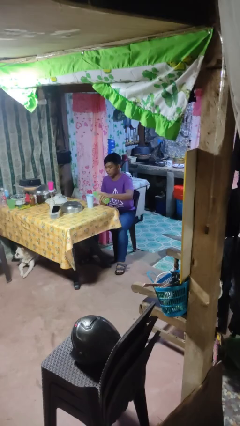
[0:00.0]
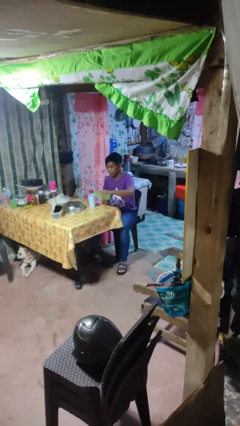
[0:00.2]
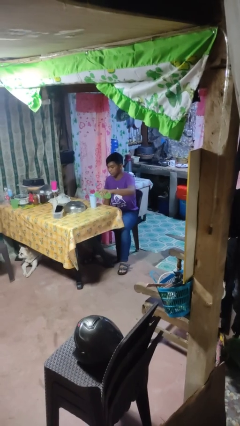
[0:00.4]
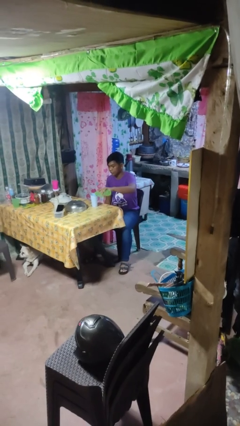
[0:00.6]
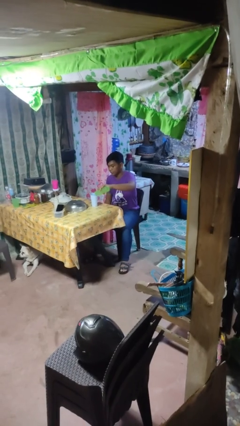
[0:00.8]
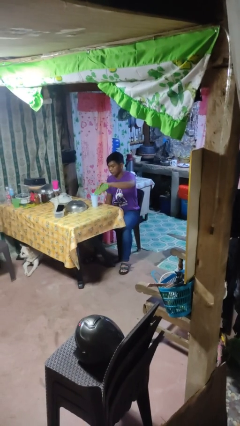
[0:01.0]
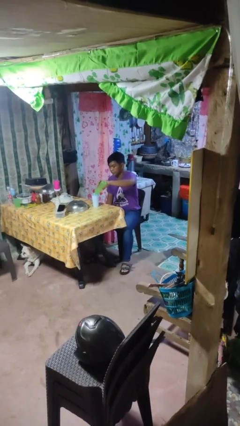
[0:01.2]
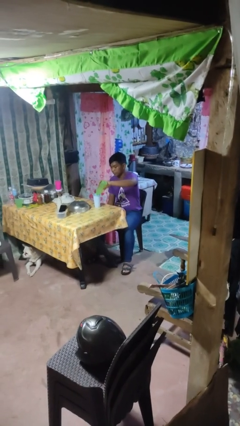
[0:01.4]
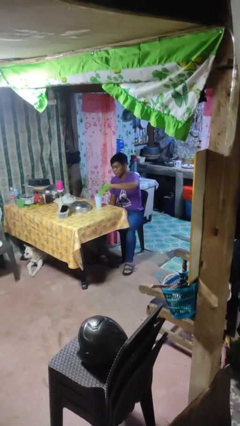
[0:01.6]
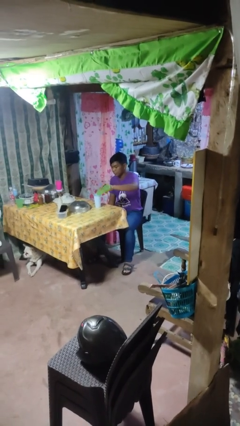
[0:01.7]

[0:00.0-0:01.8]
person pours liquid into cup

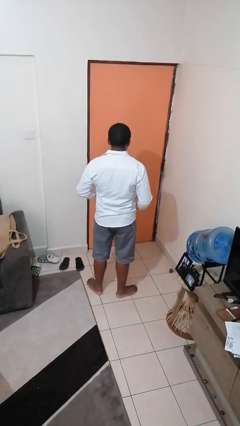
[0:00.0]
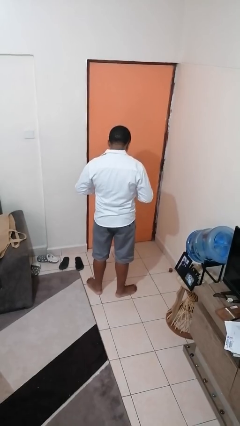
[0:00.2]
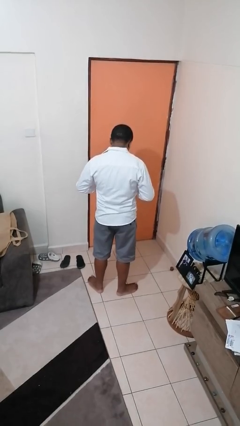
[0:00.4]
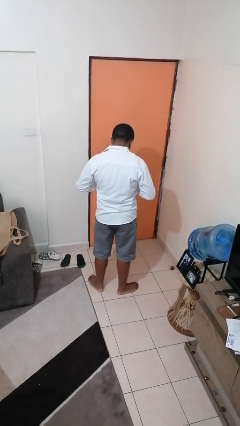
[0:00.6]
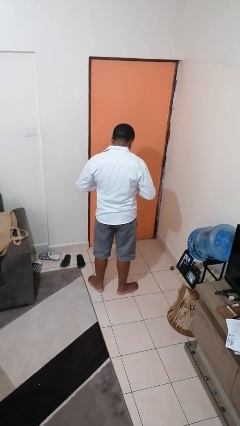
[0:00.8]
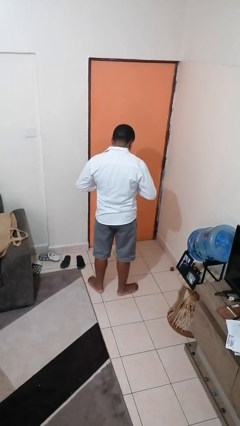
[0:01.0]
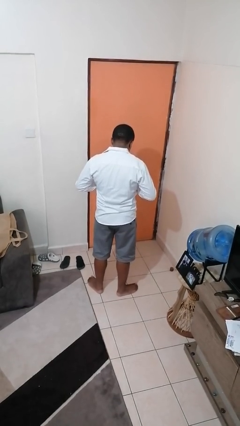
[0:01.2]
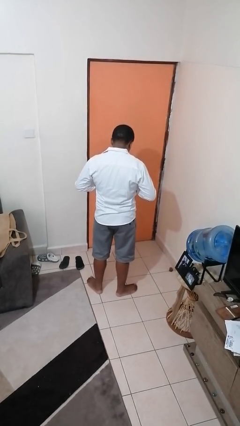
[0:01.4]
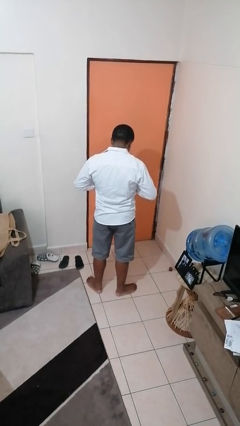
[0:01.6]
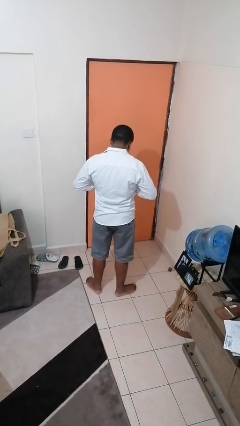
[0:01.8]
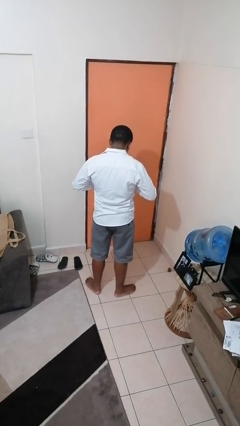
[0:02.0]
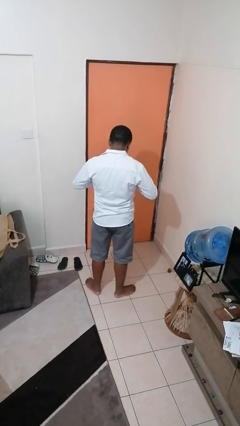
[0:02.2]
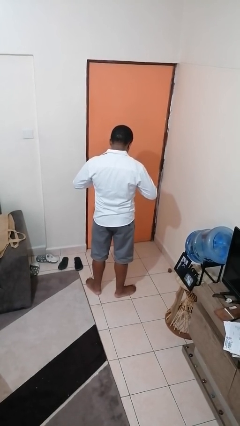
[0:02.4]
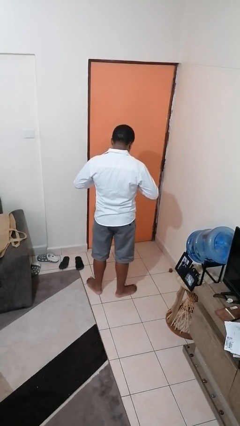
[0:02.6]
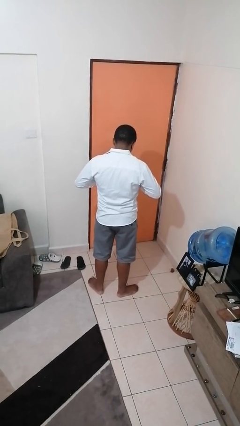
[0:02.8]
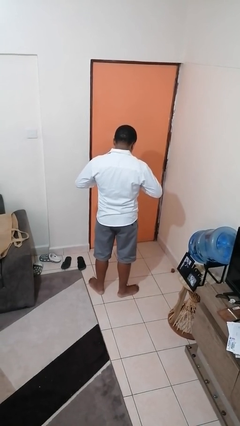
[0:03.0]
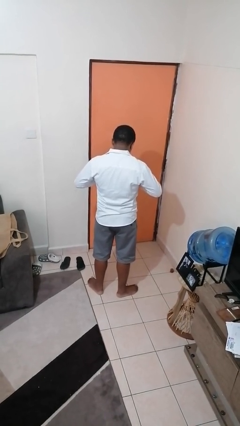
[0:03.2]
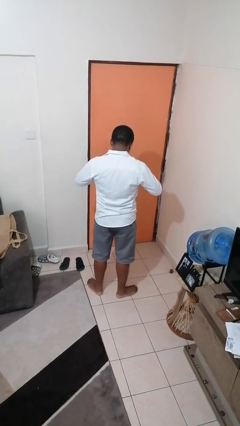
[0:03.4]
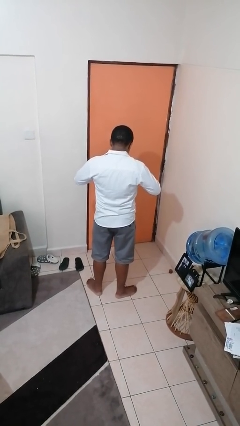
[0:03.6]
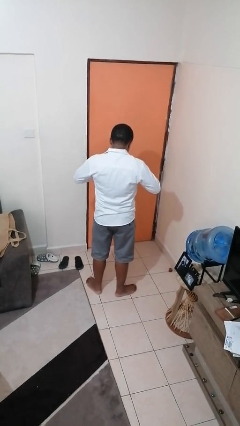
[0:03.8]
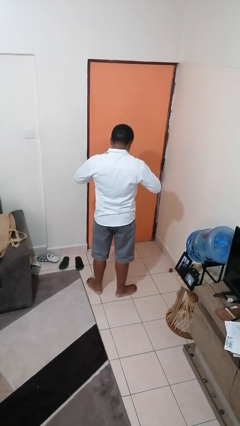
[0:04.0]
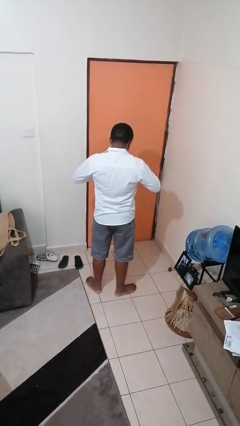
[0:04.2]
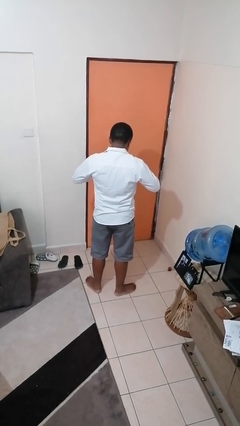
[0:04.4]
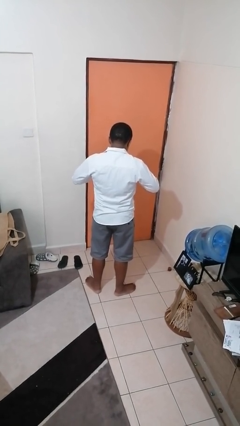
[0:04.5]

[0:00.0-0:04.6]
person buttons shirt

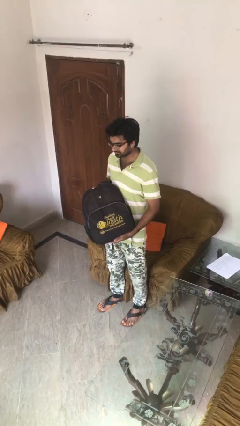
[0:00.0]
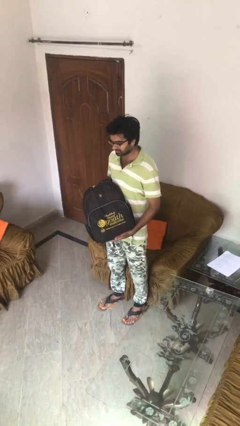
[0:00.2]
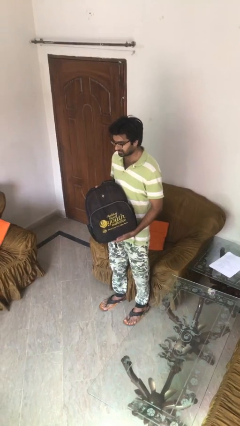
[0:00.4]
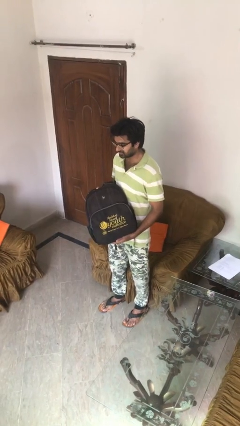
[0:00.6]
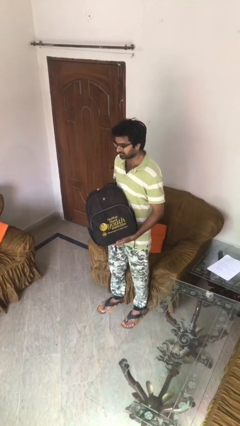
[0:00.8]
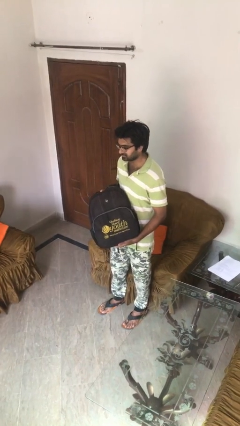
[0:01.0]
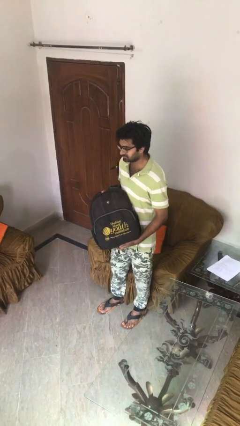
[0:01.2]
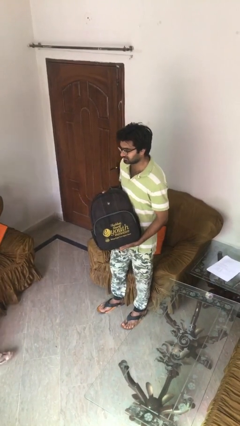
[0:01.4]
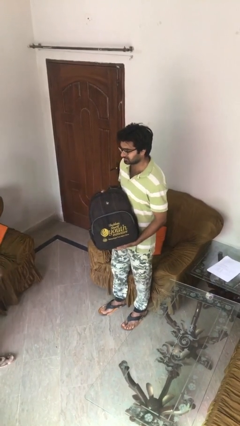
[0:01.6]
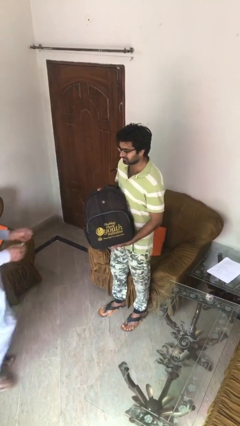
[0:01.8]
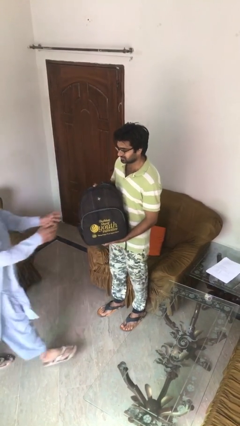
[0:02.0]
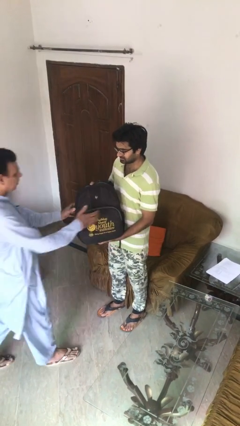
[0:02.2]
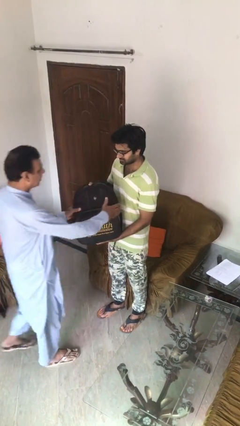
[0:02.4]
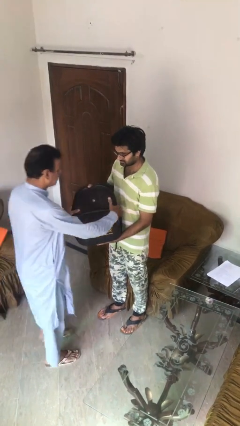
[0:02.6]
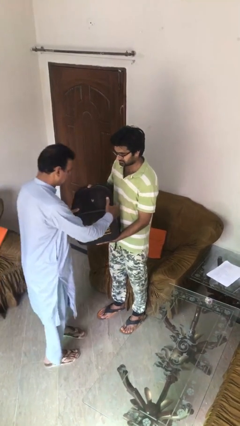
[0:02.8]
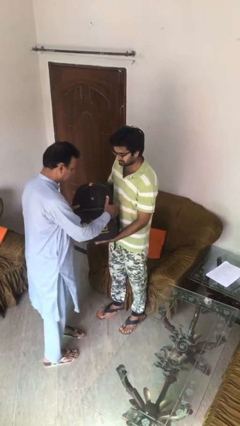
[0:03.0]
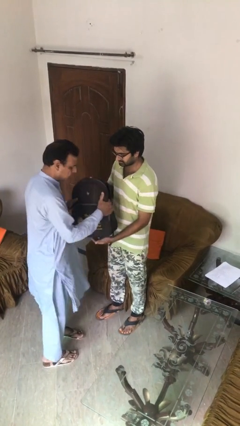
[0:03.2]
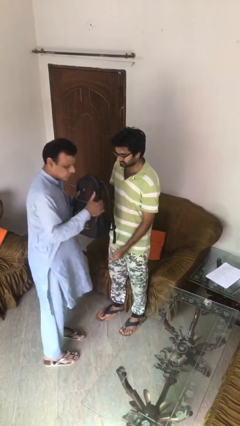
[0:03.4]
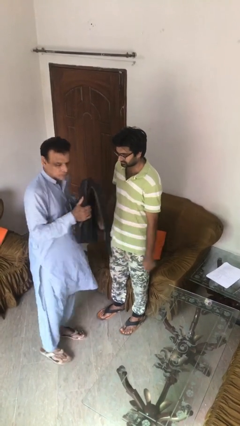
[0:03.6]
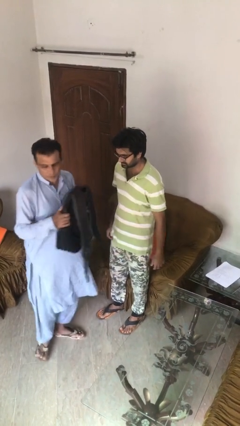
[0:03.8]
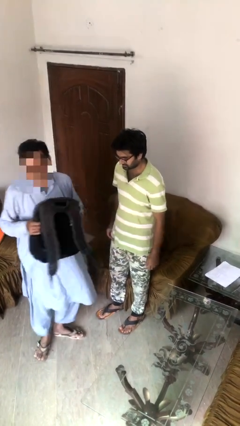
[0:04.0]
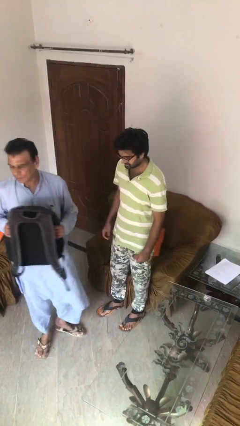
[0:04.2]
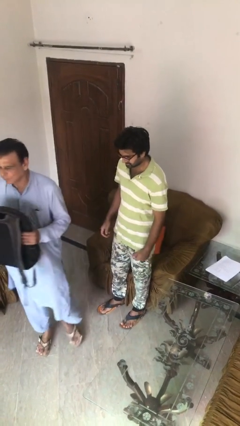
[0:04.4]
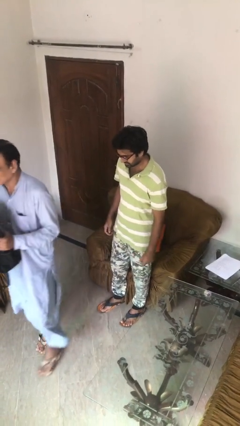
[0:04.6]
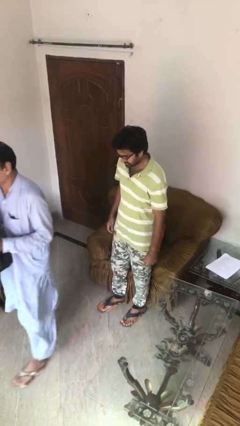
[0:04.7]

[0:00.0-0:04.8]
person transfers object to person

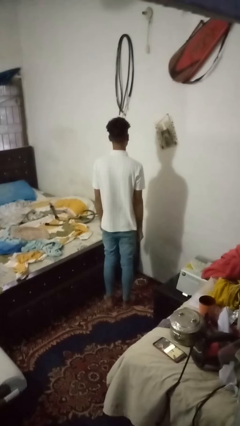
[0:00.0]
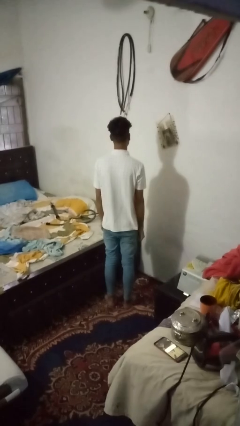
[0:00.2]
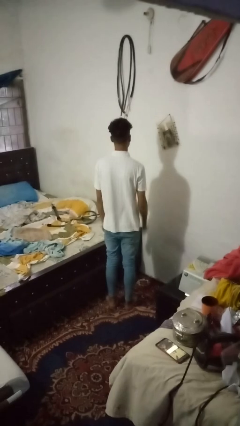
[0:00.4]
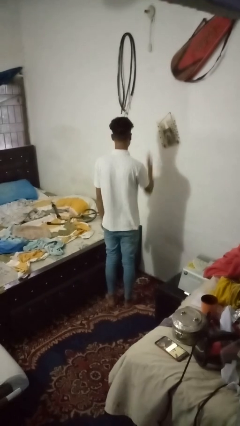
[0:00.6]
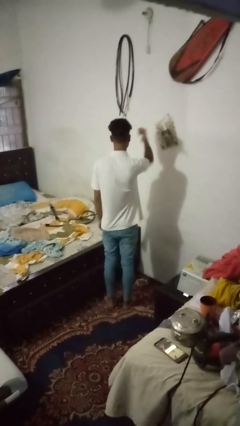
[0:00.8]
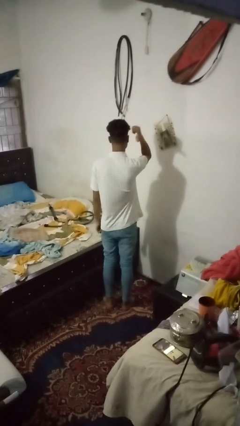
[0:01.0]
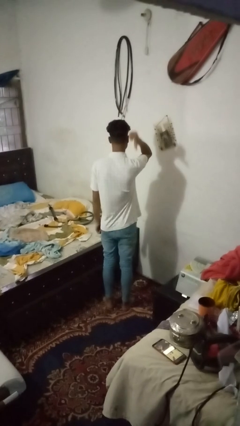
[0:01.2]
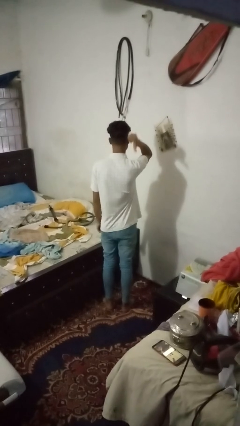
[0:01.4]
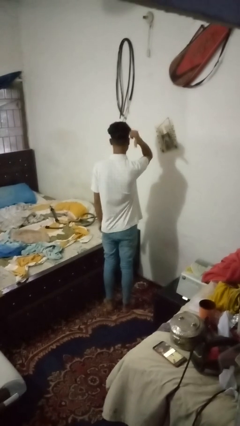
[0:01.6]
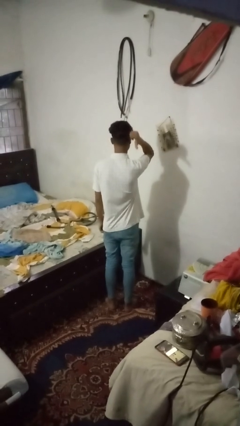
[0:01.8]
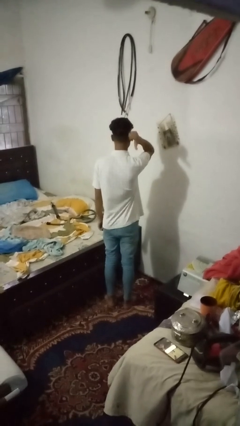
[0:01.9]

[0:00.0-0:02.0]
person gestures behind me

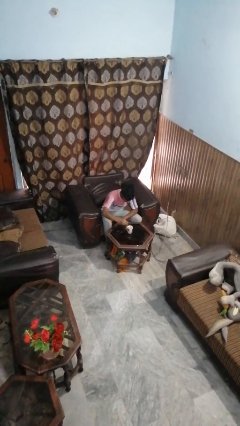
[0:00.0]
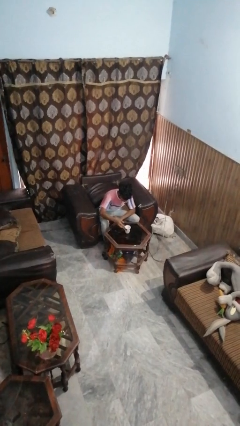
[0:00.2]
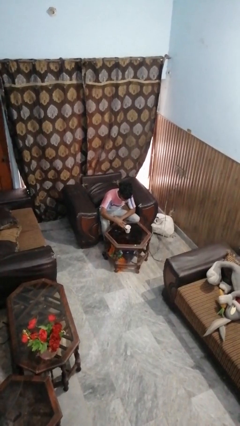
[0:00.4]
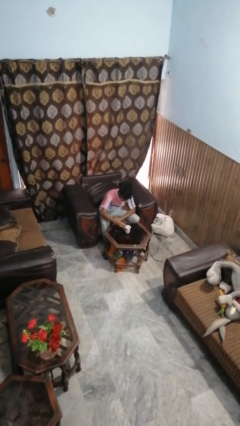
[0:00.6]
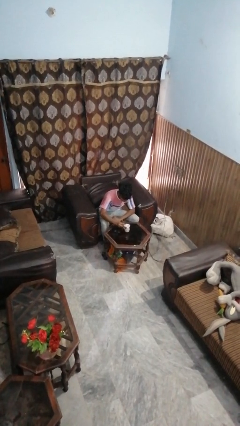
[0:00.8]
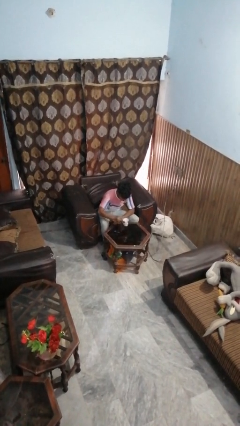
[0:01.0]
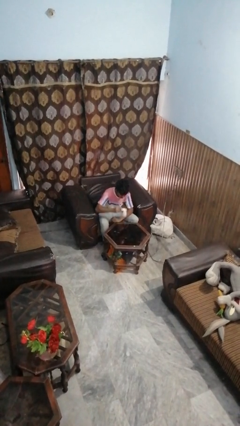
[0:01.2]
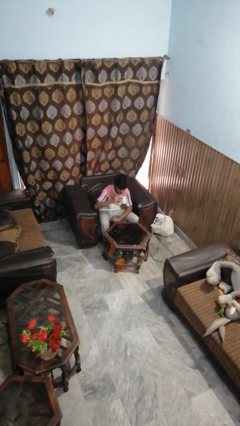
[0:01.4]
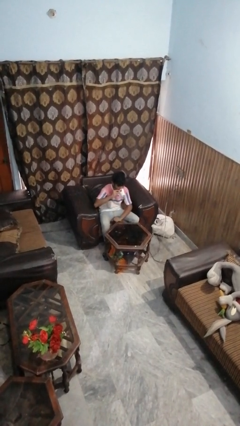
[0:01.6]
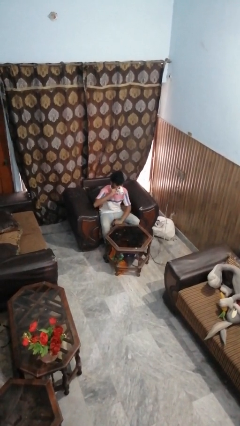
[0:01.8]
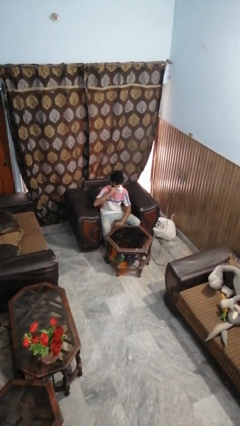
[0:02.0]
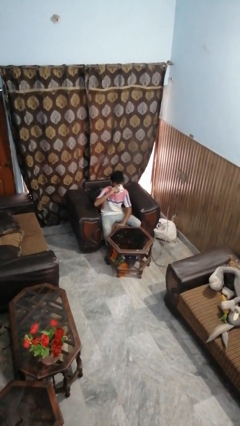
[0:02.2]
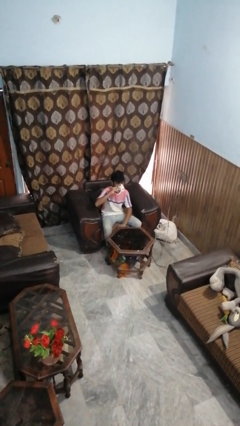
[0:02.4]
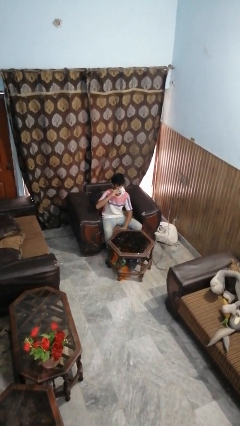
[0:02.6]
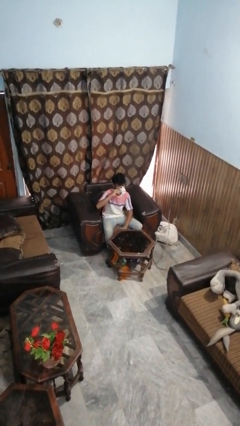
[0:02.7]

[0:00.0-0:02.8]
person drinks from mug

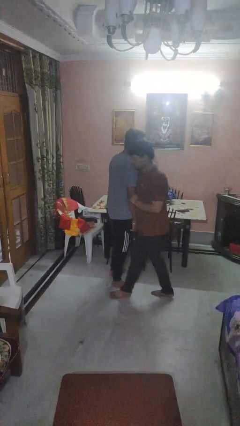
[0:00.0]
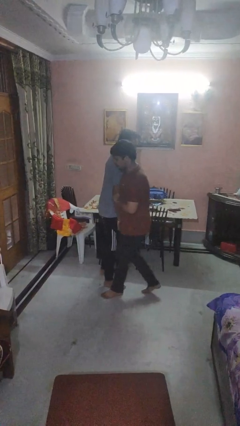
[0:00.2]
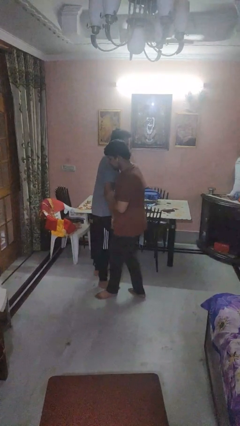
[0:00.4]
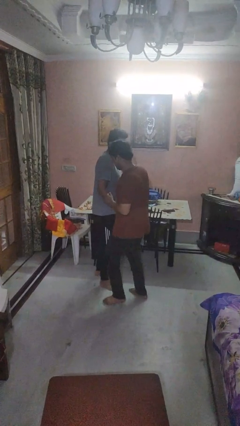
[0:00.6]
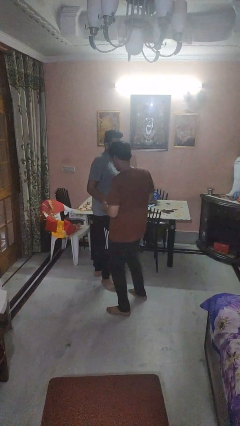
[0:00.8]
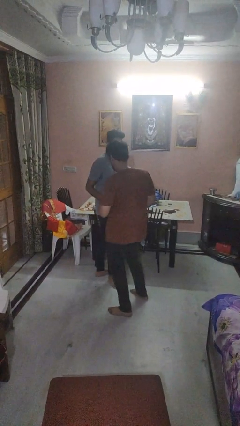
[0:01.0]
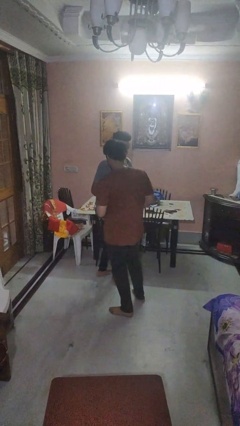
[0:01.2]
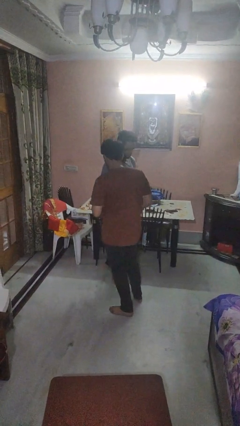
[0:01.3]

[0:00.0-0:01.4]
person bumps into person
